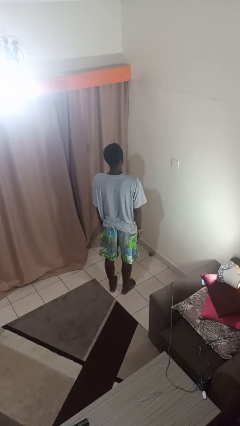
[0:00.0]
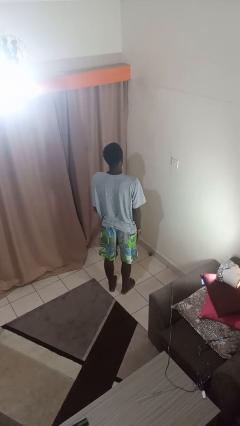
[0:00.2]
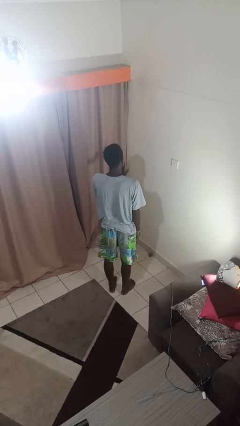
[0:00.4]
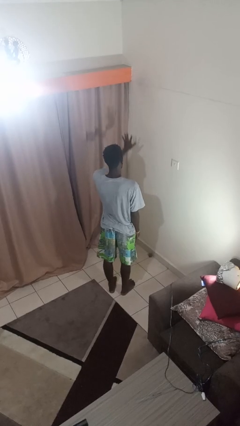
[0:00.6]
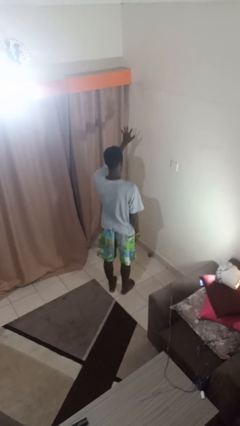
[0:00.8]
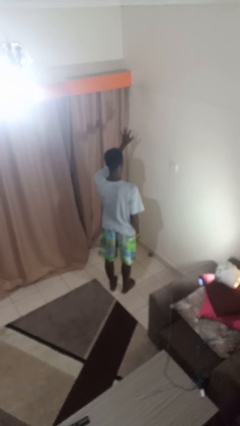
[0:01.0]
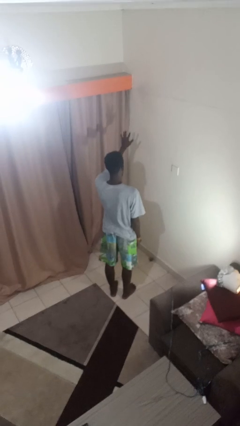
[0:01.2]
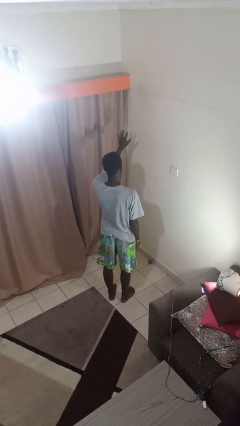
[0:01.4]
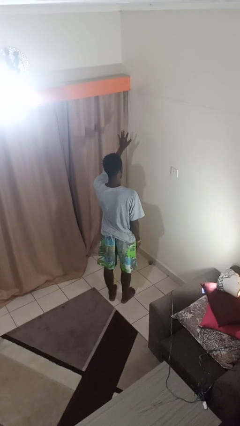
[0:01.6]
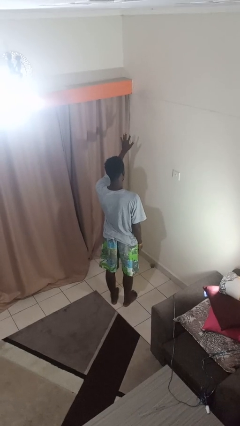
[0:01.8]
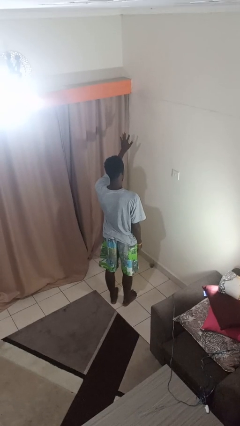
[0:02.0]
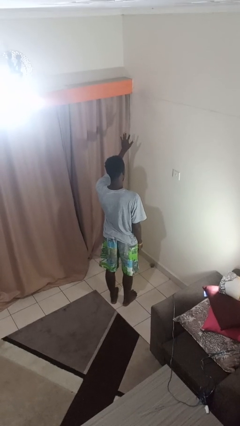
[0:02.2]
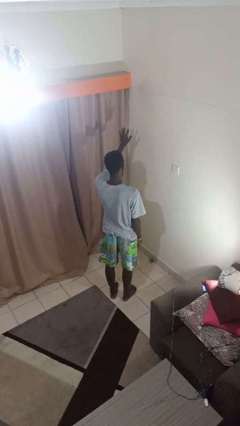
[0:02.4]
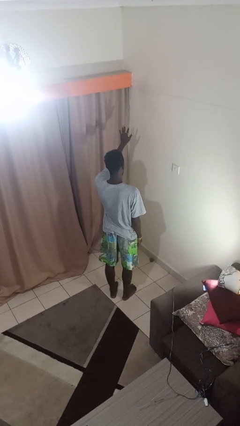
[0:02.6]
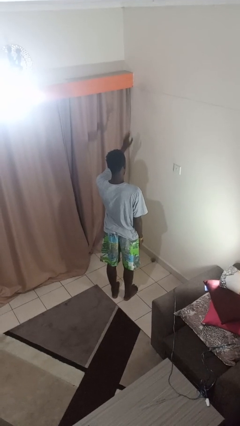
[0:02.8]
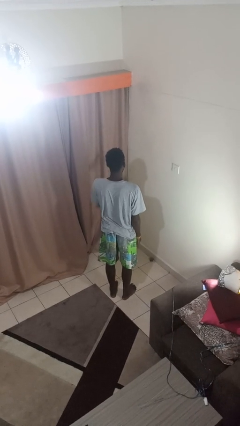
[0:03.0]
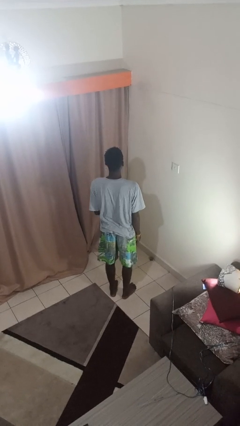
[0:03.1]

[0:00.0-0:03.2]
person gestures number five

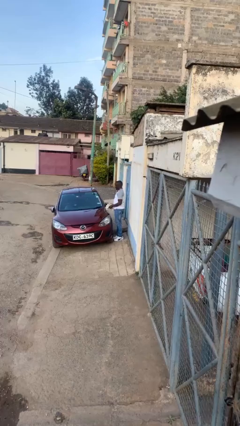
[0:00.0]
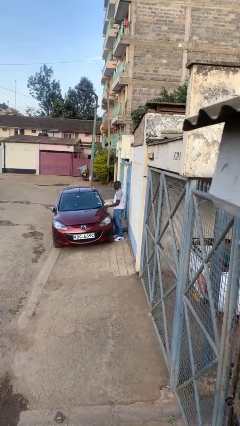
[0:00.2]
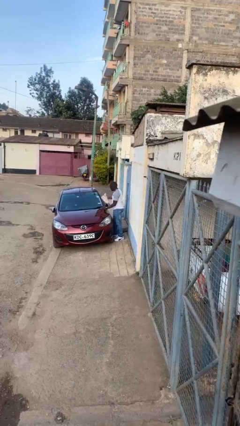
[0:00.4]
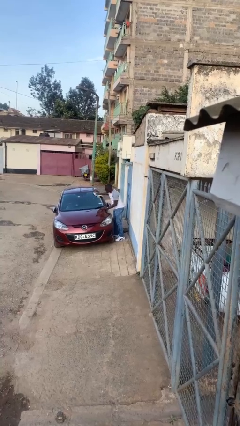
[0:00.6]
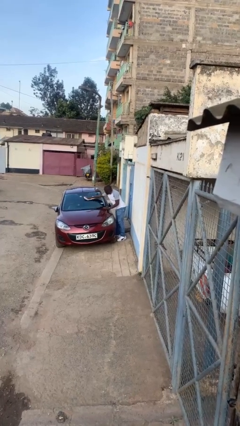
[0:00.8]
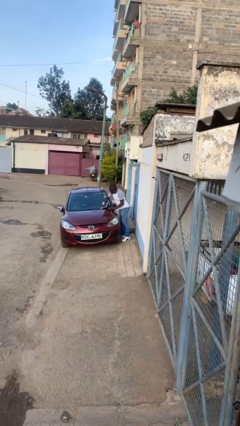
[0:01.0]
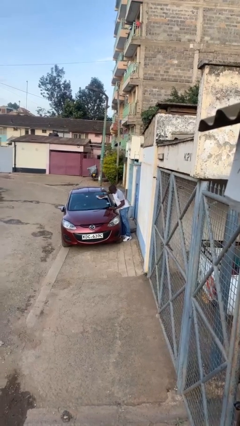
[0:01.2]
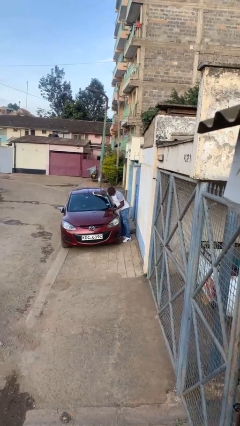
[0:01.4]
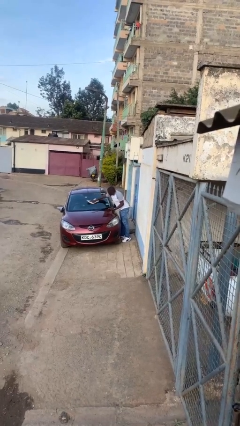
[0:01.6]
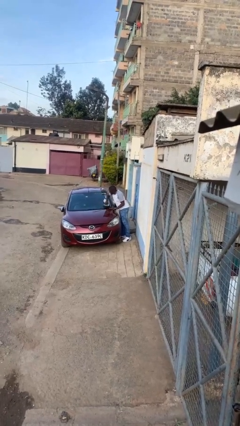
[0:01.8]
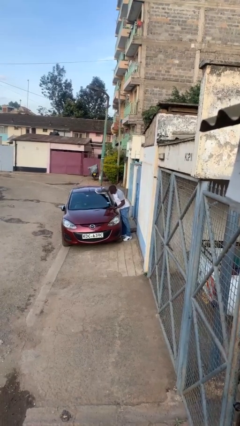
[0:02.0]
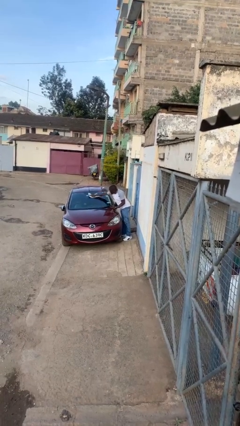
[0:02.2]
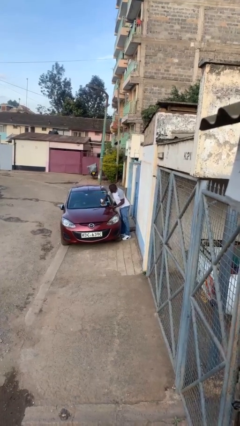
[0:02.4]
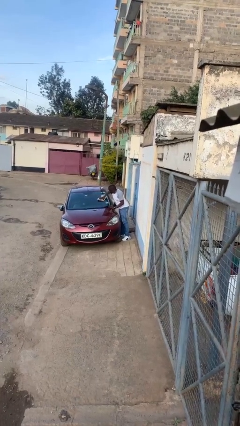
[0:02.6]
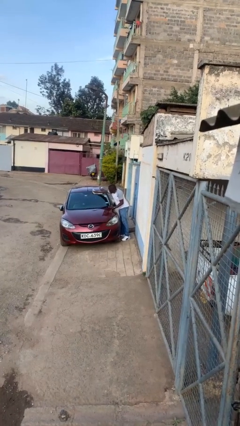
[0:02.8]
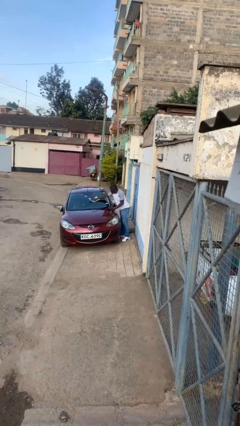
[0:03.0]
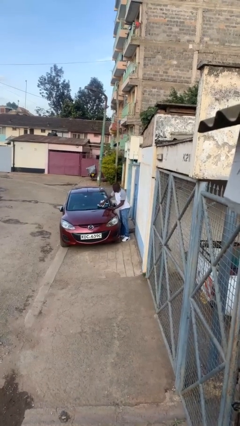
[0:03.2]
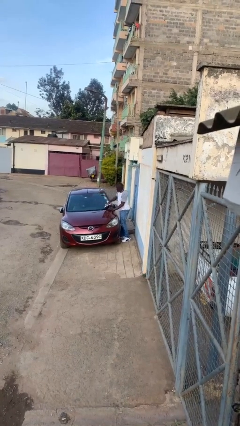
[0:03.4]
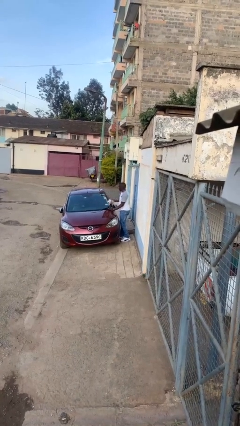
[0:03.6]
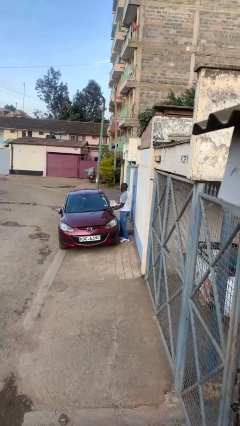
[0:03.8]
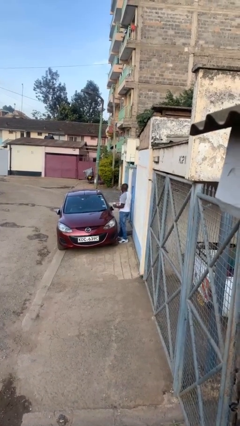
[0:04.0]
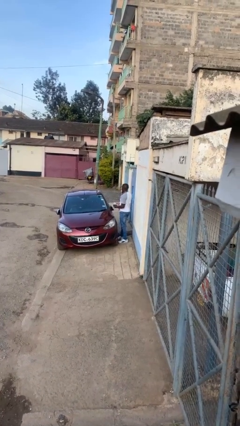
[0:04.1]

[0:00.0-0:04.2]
person polishes car with rag

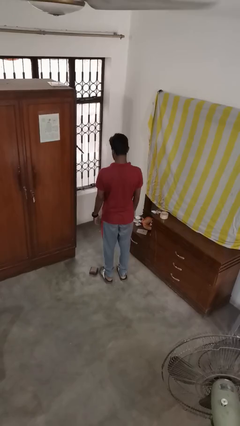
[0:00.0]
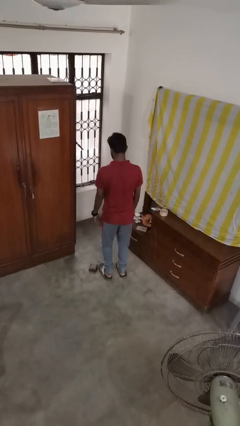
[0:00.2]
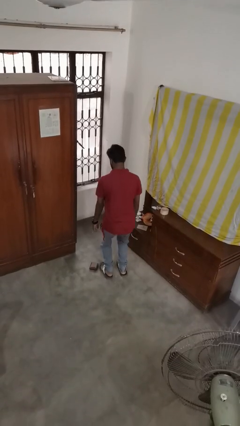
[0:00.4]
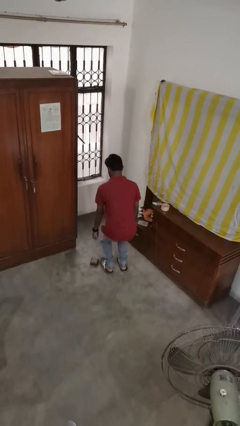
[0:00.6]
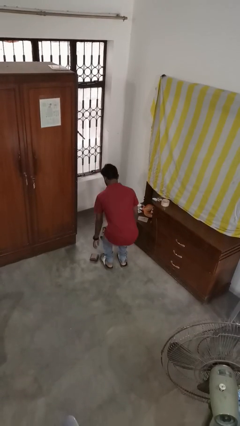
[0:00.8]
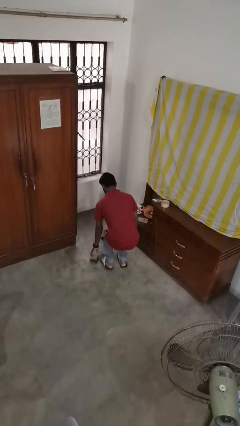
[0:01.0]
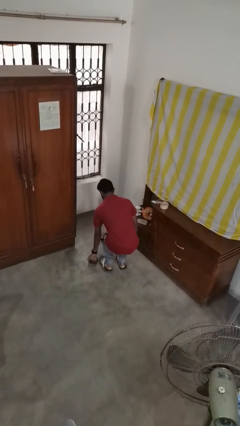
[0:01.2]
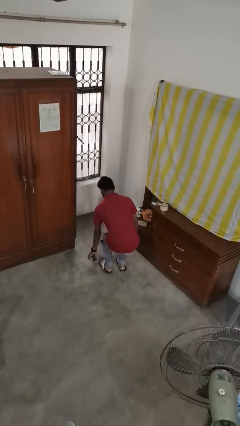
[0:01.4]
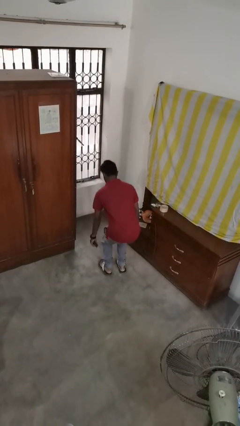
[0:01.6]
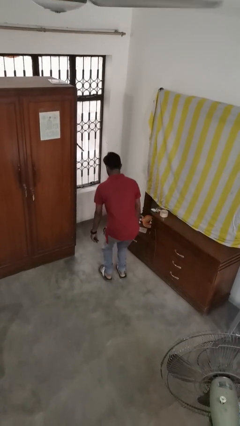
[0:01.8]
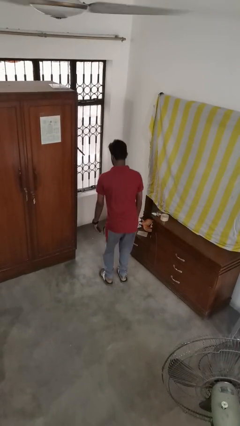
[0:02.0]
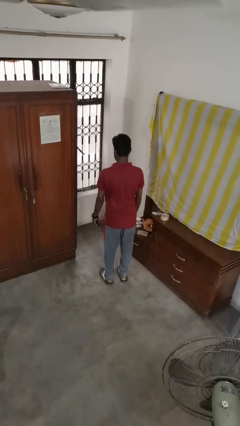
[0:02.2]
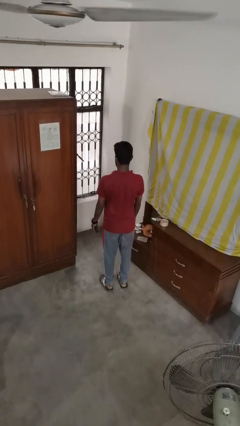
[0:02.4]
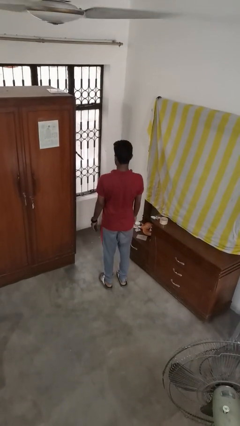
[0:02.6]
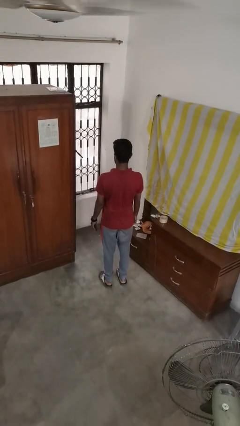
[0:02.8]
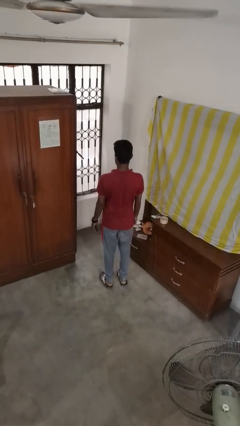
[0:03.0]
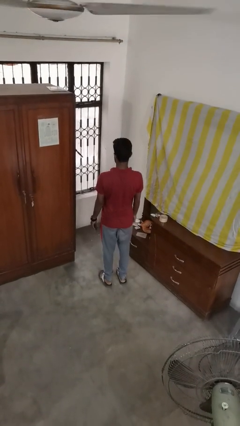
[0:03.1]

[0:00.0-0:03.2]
person picks up object from floor

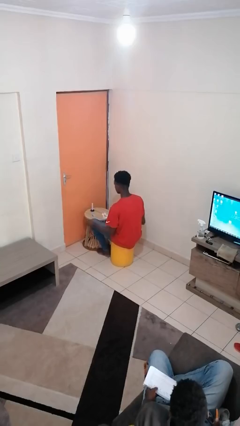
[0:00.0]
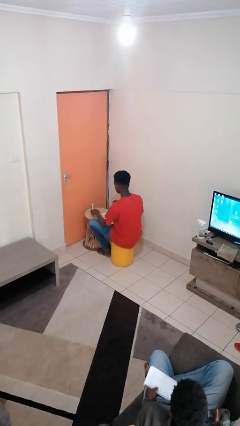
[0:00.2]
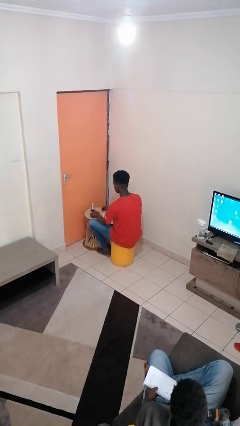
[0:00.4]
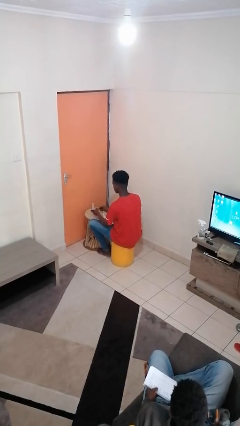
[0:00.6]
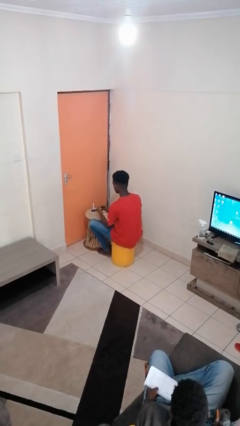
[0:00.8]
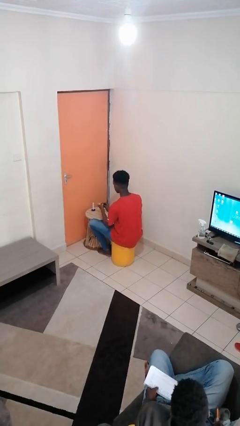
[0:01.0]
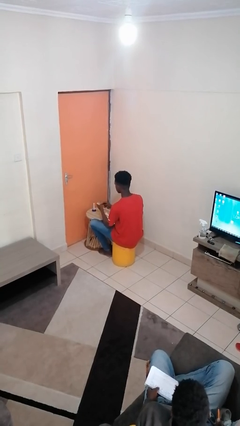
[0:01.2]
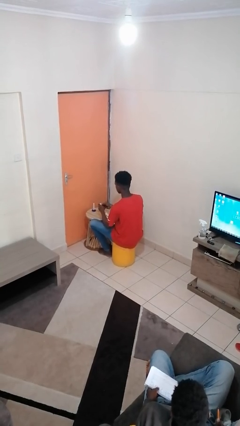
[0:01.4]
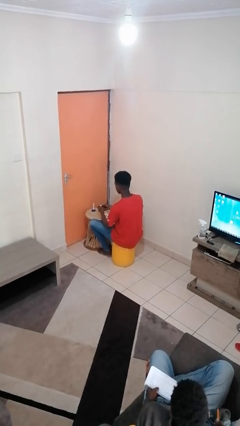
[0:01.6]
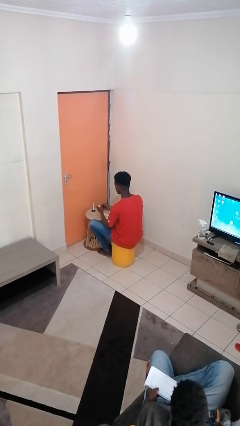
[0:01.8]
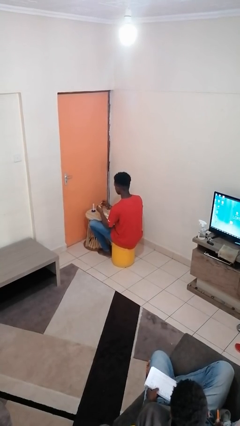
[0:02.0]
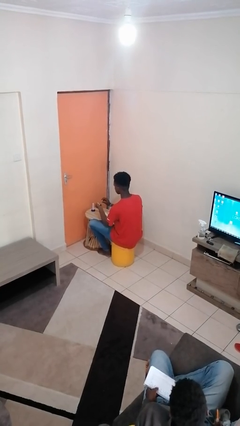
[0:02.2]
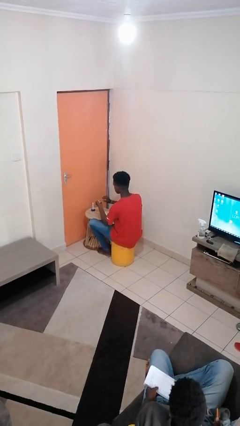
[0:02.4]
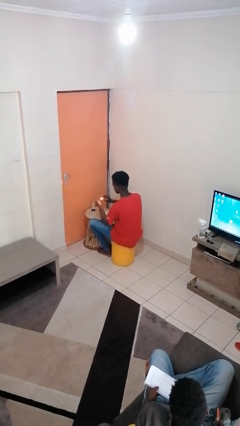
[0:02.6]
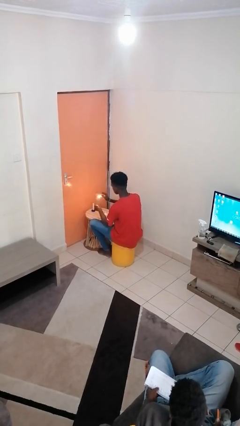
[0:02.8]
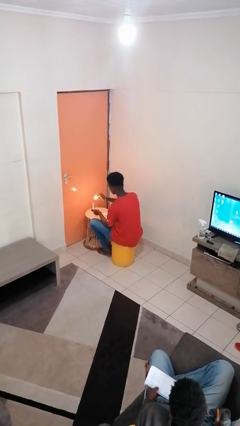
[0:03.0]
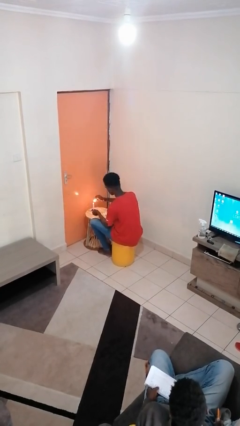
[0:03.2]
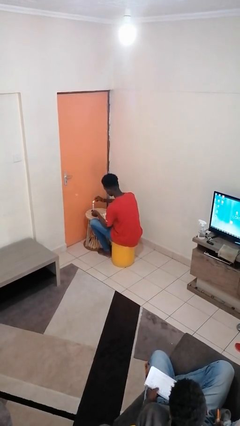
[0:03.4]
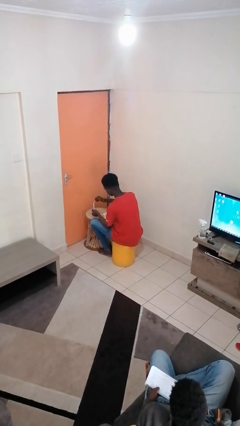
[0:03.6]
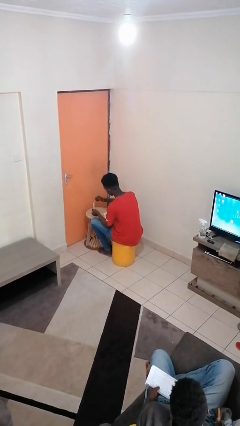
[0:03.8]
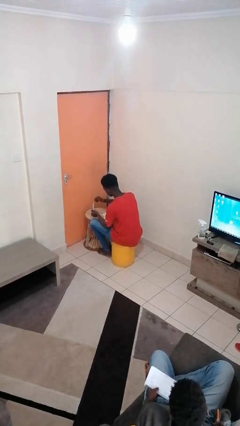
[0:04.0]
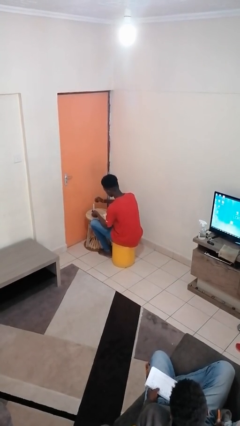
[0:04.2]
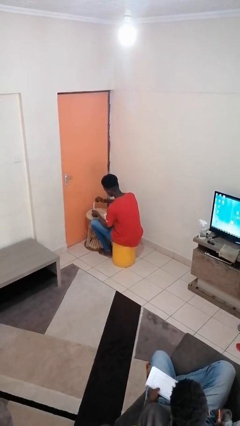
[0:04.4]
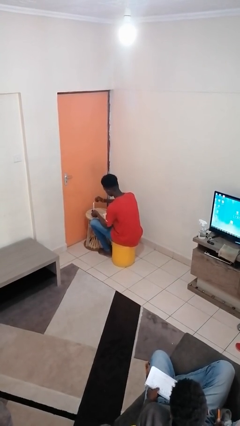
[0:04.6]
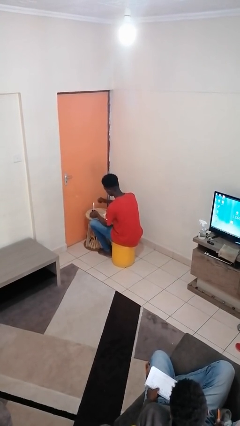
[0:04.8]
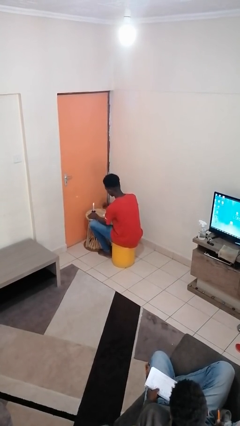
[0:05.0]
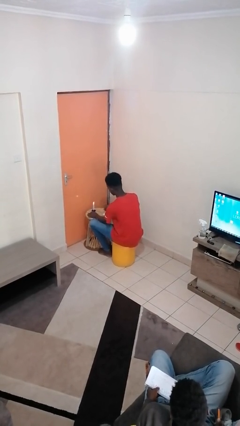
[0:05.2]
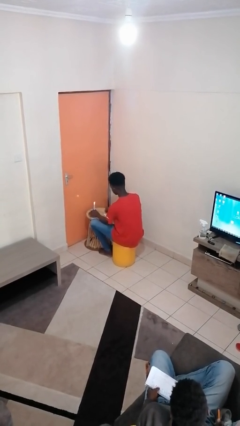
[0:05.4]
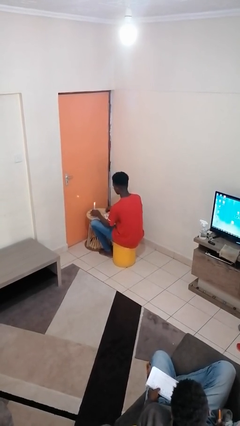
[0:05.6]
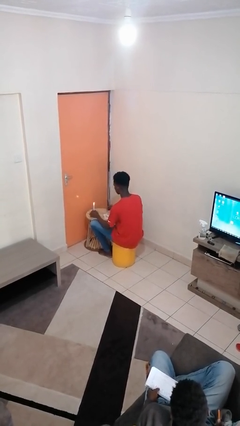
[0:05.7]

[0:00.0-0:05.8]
person lights candle

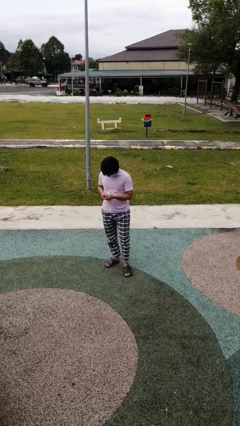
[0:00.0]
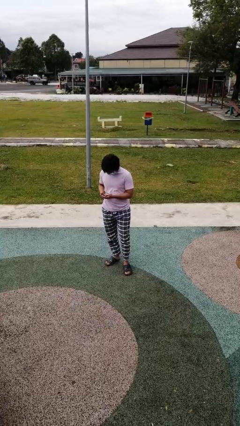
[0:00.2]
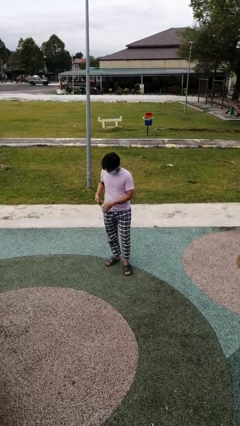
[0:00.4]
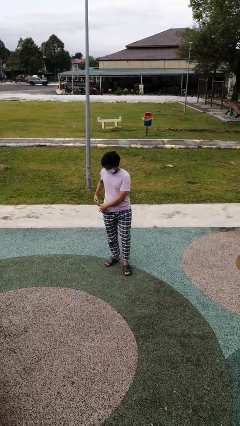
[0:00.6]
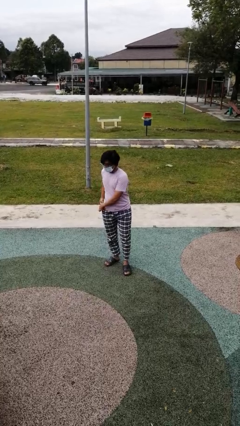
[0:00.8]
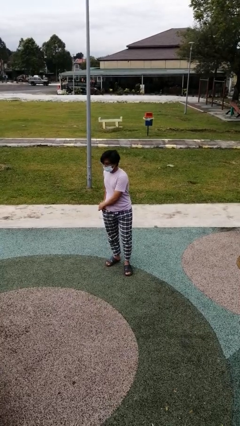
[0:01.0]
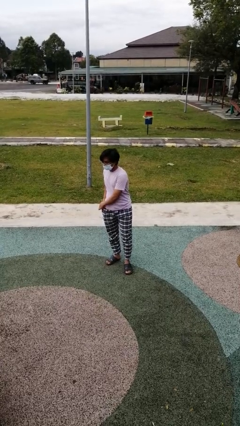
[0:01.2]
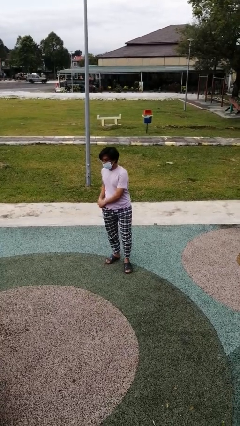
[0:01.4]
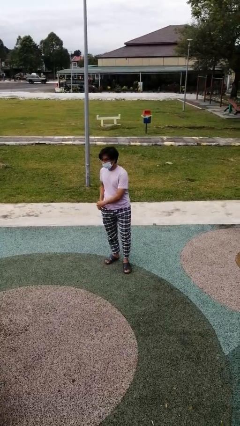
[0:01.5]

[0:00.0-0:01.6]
person puts phone into pocket
